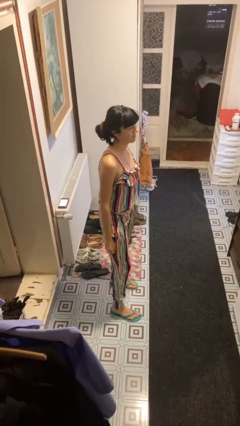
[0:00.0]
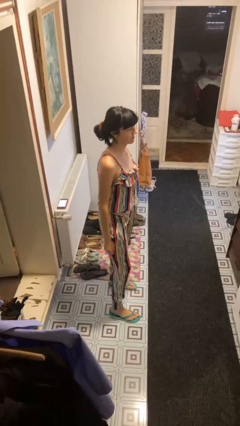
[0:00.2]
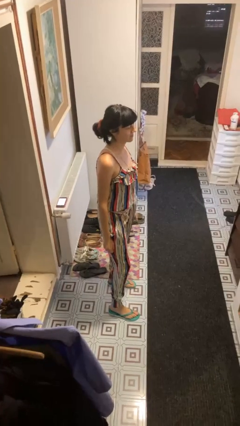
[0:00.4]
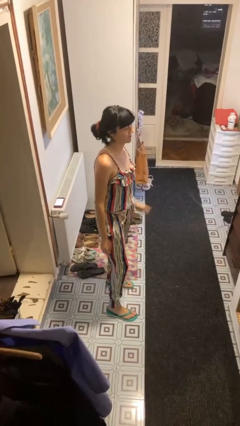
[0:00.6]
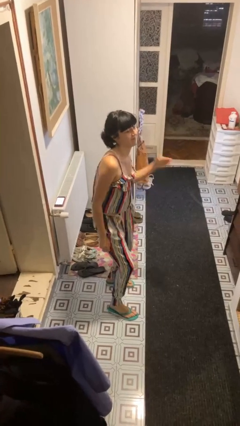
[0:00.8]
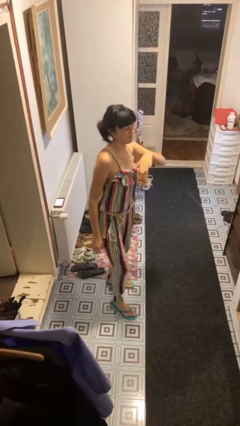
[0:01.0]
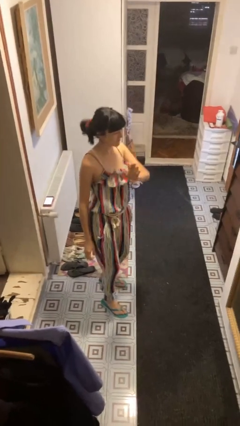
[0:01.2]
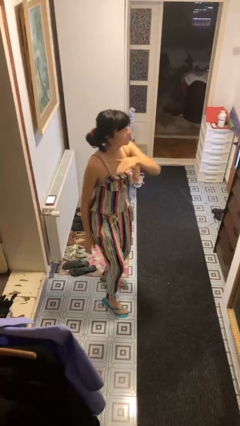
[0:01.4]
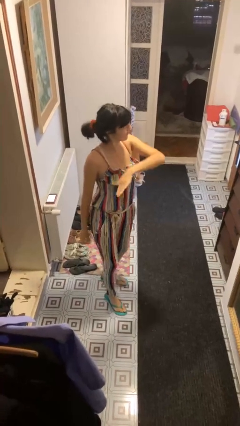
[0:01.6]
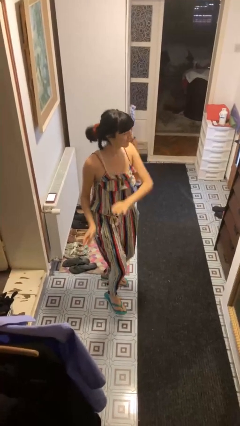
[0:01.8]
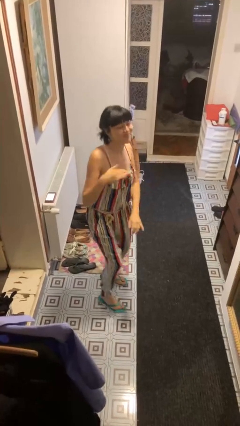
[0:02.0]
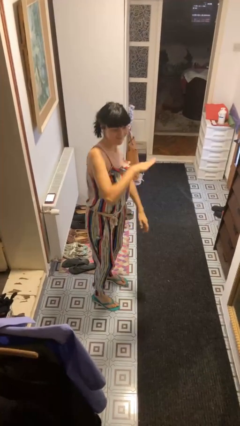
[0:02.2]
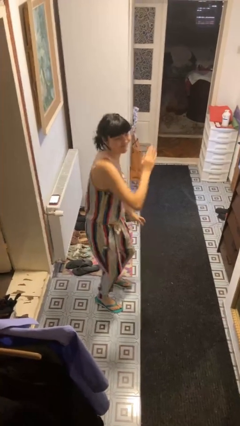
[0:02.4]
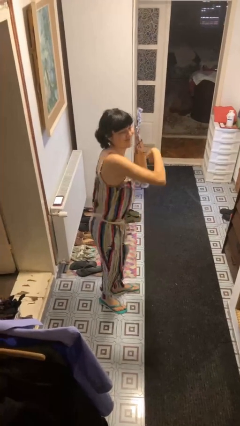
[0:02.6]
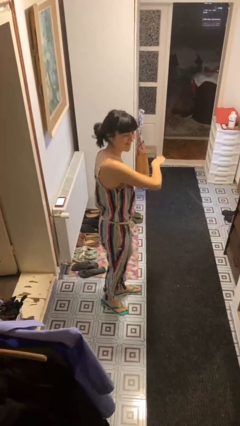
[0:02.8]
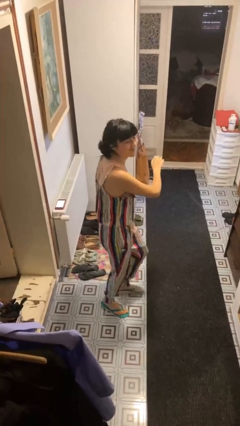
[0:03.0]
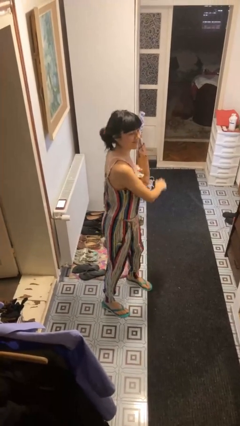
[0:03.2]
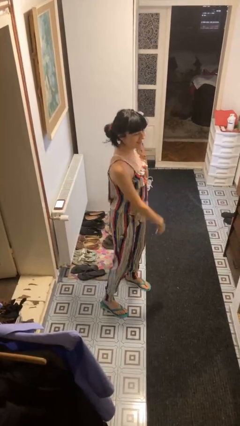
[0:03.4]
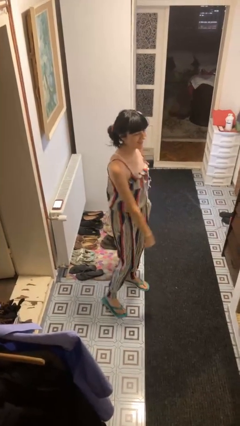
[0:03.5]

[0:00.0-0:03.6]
person dances in place

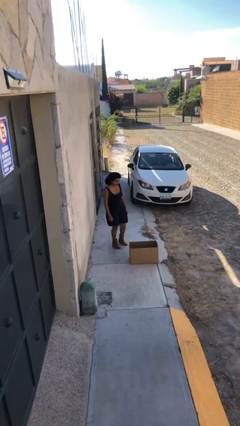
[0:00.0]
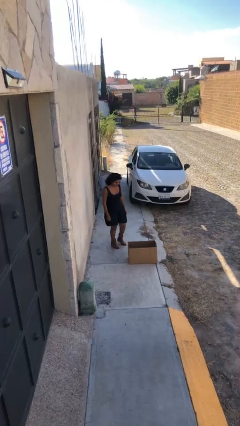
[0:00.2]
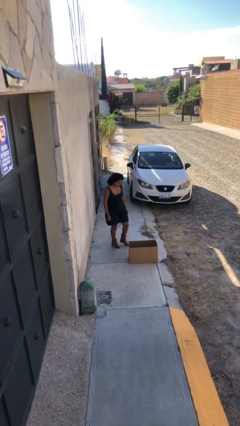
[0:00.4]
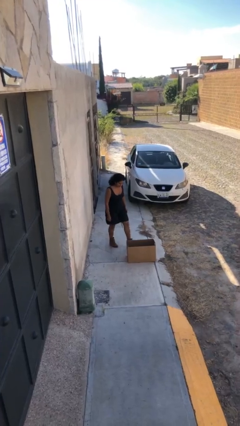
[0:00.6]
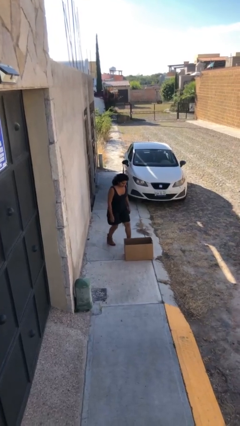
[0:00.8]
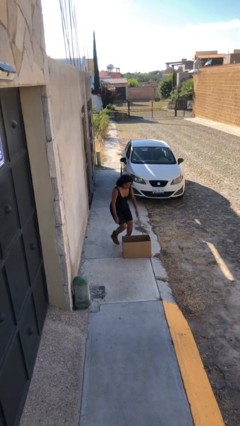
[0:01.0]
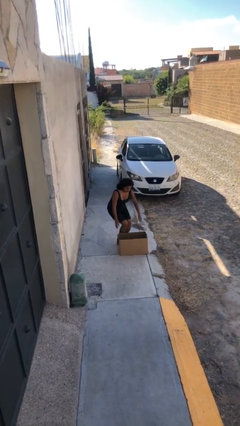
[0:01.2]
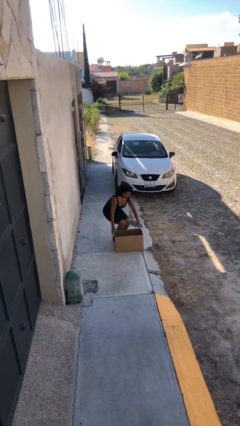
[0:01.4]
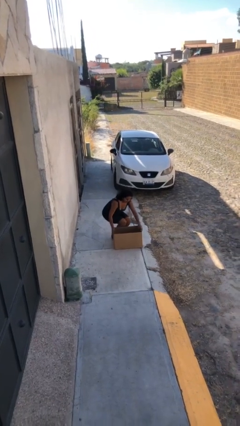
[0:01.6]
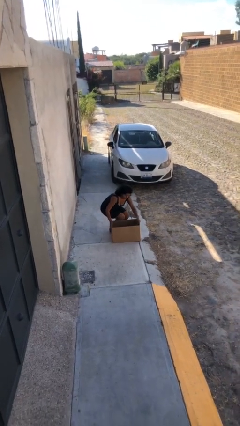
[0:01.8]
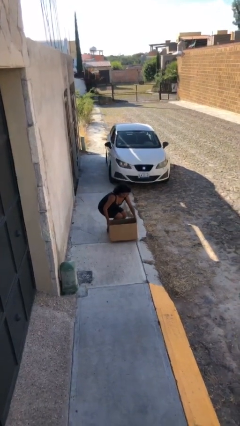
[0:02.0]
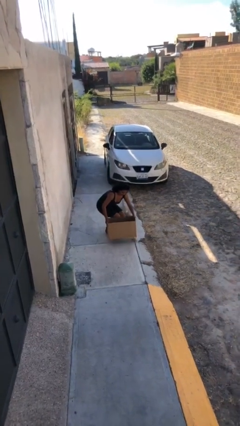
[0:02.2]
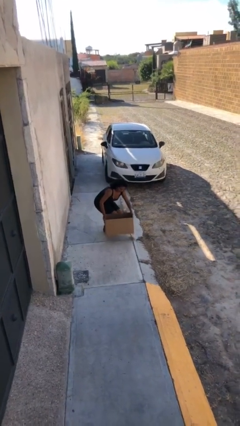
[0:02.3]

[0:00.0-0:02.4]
person picks up object from floor

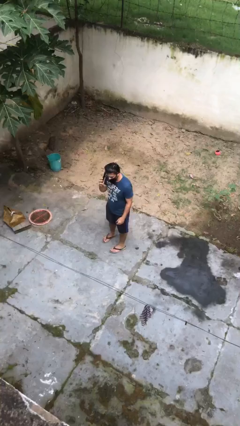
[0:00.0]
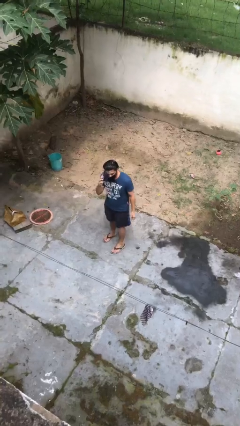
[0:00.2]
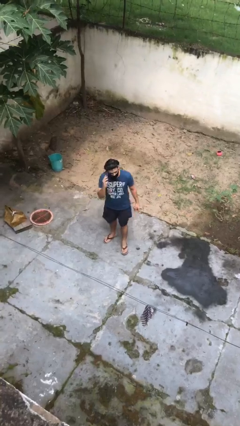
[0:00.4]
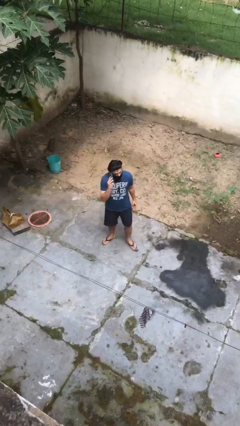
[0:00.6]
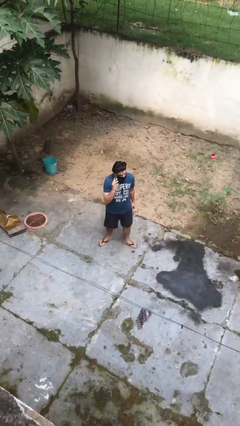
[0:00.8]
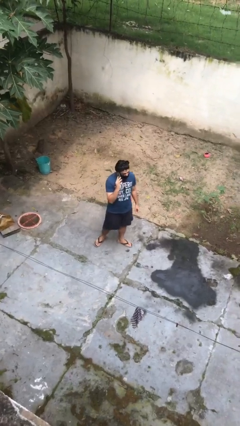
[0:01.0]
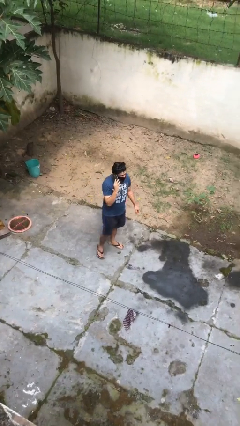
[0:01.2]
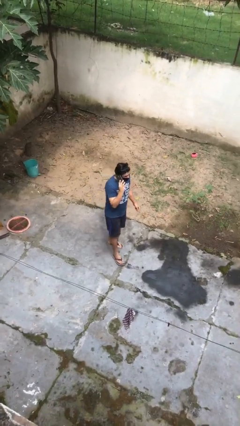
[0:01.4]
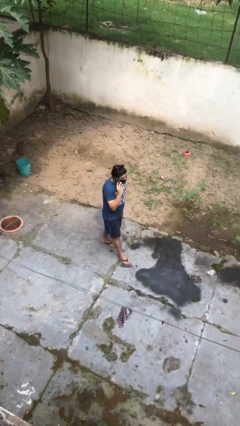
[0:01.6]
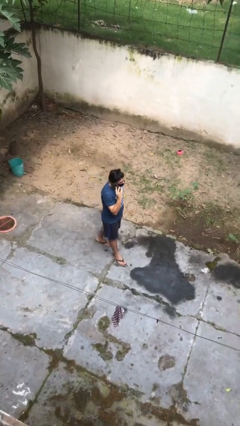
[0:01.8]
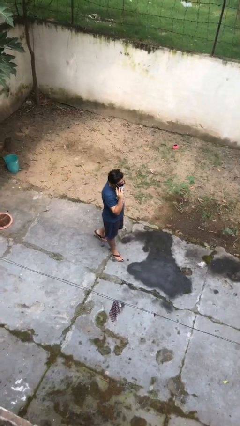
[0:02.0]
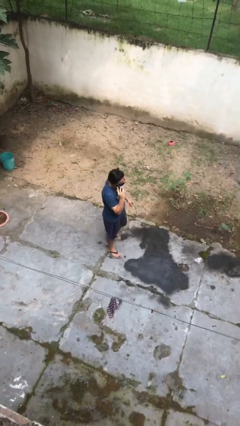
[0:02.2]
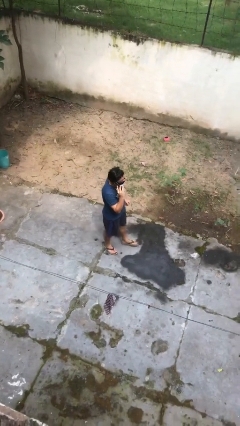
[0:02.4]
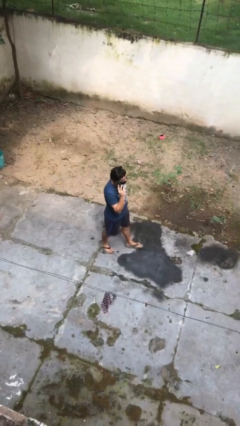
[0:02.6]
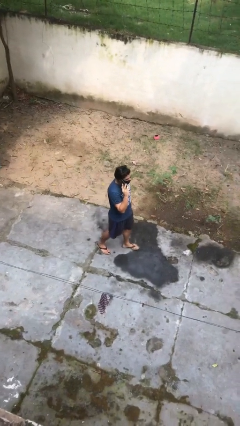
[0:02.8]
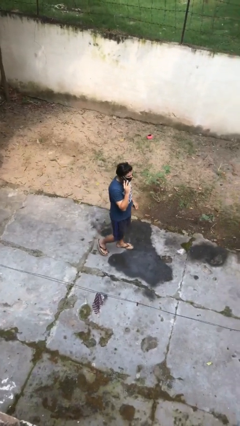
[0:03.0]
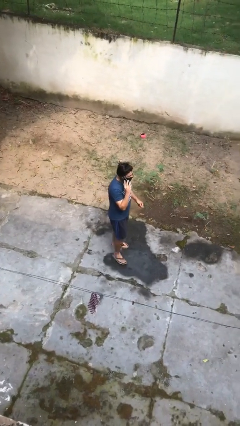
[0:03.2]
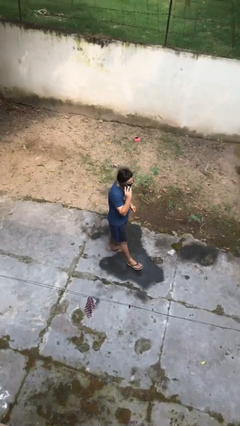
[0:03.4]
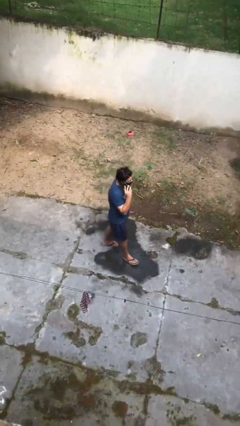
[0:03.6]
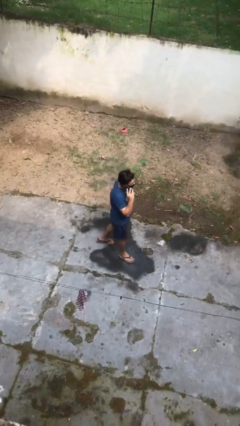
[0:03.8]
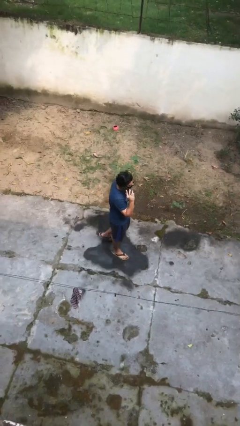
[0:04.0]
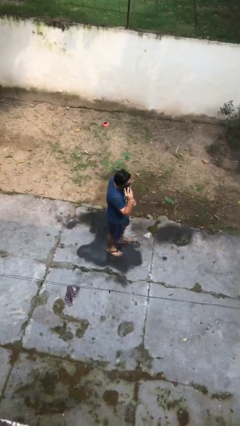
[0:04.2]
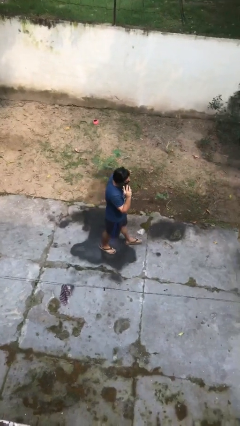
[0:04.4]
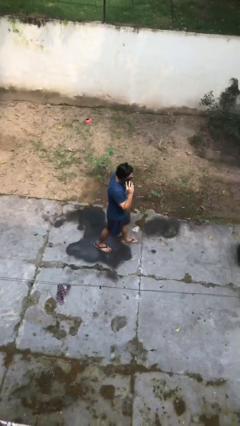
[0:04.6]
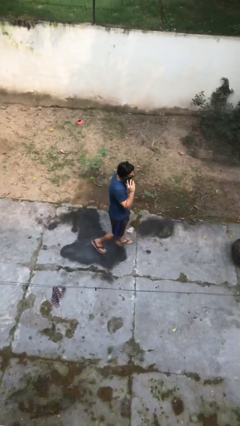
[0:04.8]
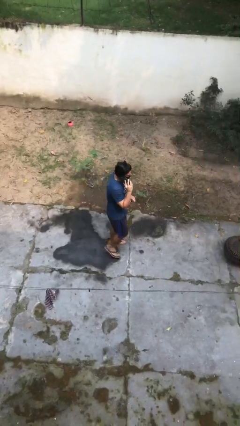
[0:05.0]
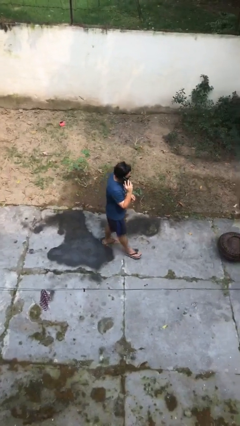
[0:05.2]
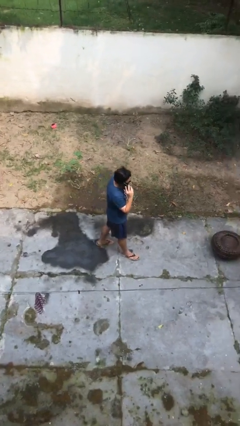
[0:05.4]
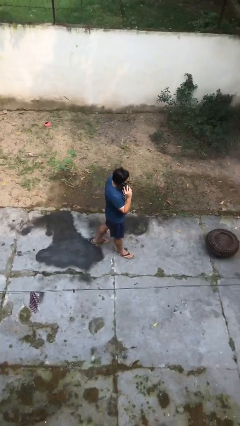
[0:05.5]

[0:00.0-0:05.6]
person talks on phone

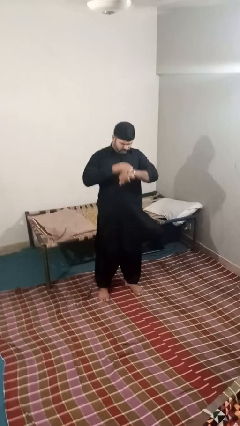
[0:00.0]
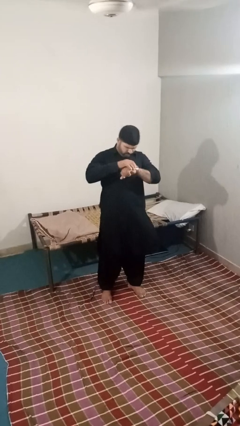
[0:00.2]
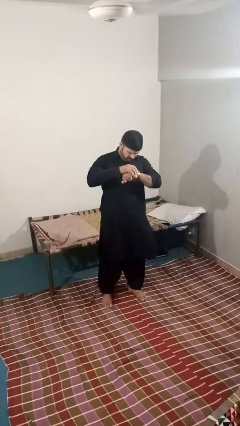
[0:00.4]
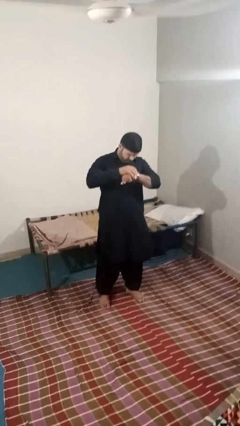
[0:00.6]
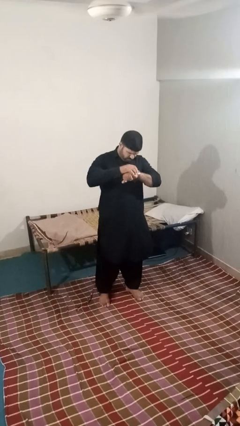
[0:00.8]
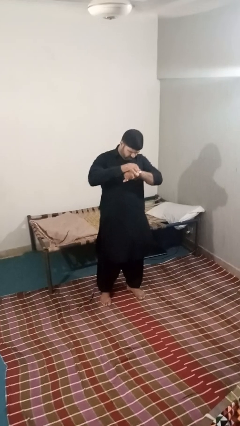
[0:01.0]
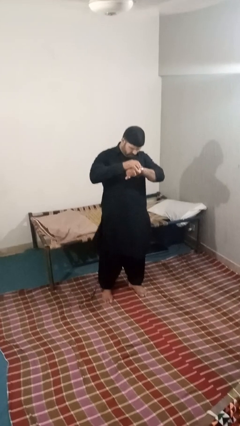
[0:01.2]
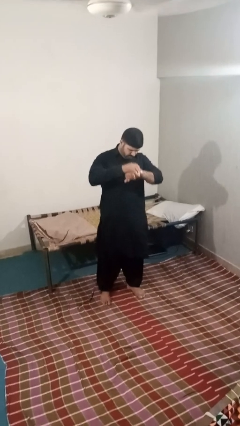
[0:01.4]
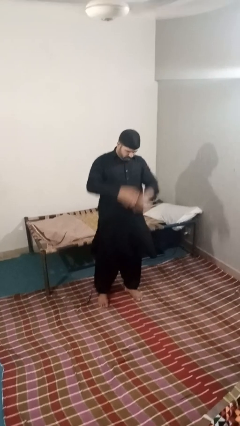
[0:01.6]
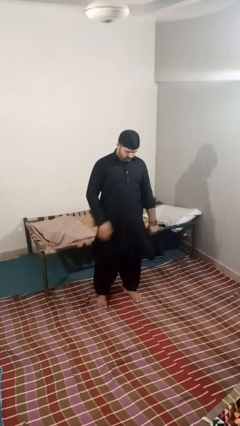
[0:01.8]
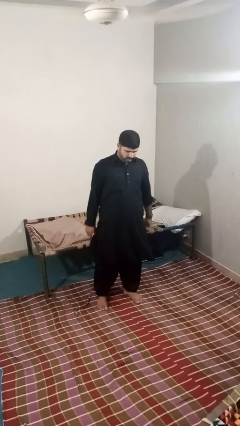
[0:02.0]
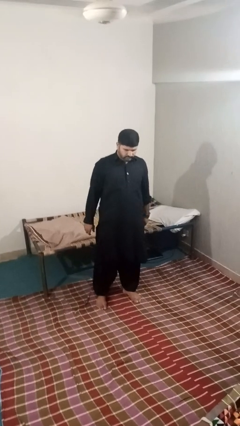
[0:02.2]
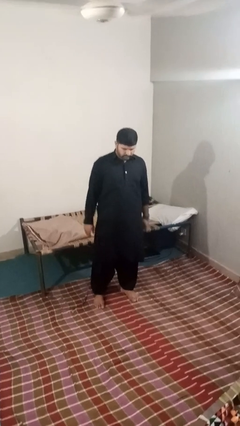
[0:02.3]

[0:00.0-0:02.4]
person looks at wristwatch

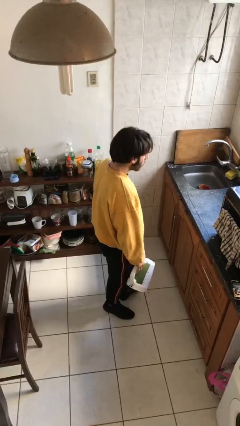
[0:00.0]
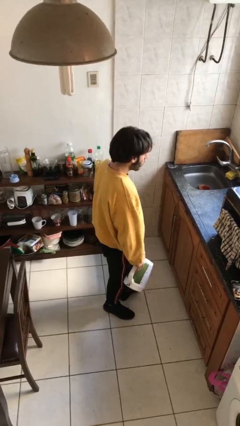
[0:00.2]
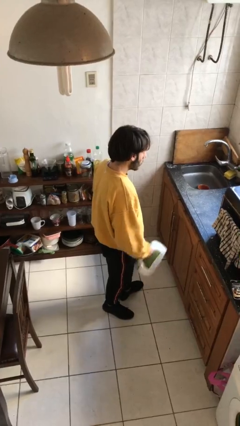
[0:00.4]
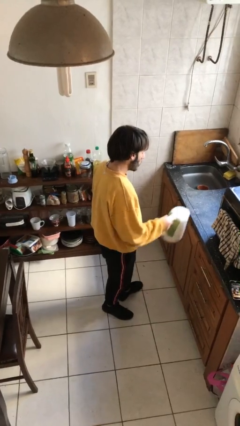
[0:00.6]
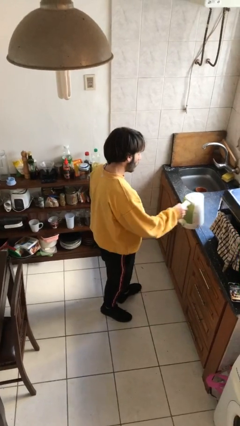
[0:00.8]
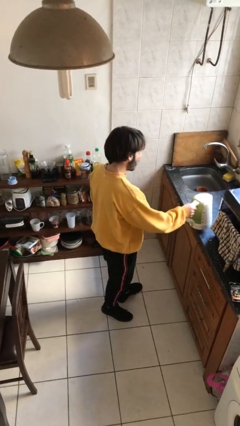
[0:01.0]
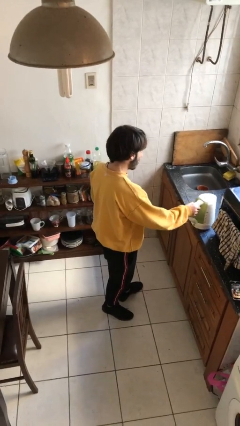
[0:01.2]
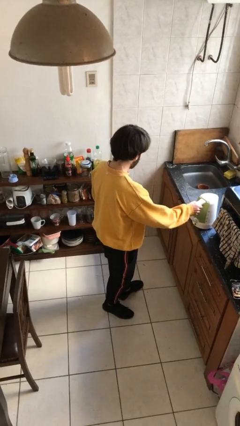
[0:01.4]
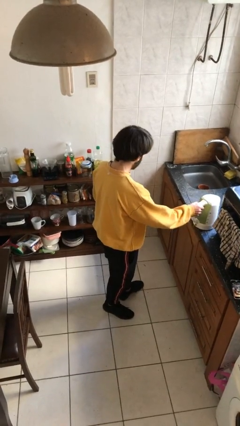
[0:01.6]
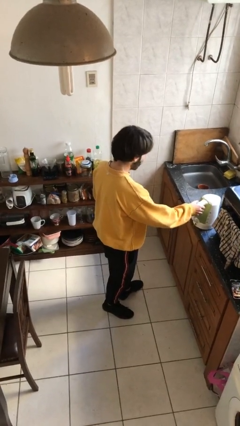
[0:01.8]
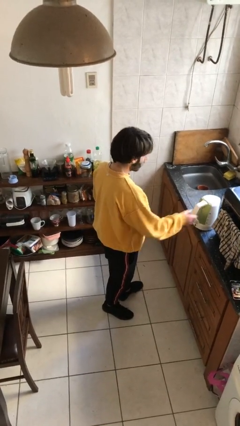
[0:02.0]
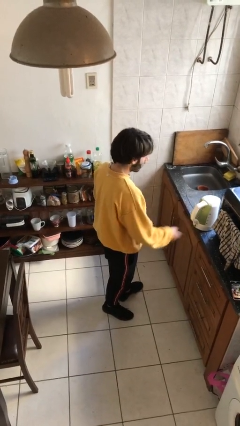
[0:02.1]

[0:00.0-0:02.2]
person puts down object on countertop

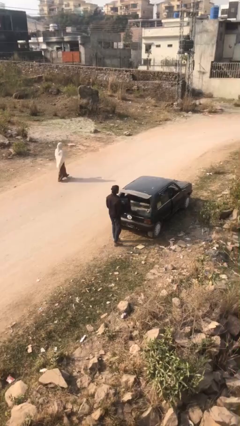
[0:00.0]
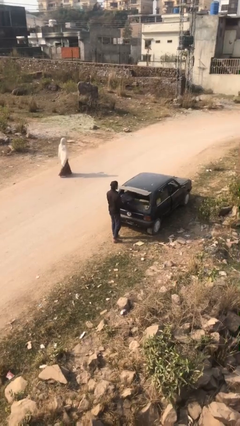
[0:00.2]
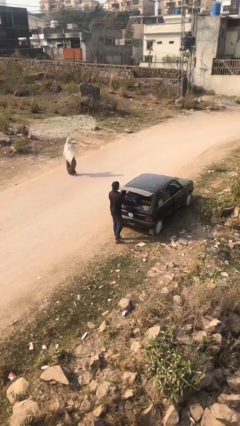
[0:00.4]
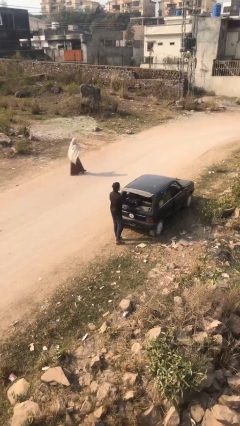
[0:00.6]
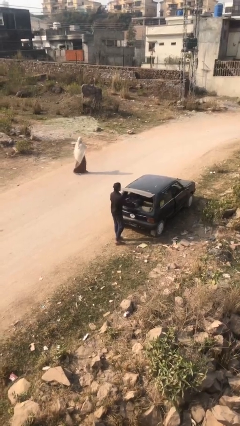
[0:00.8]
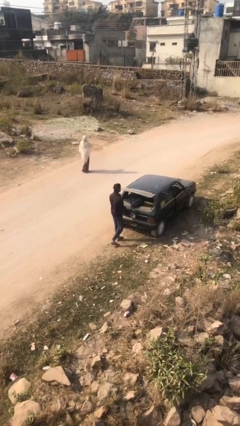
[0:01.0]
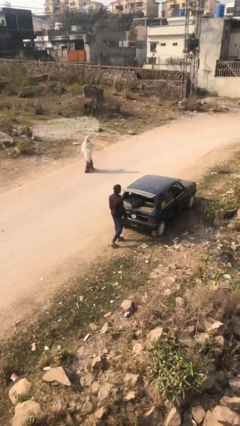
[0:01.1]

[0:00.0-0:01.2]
person loads car

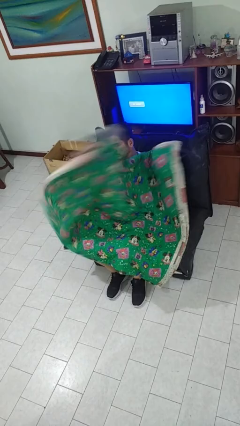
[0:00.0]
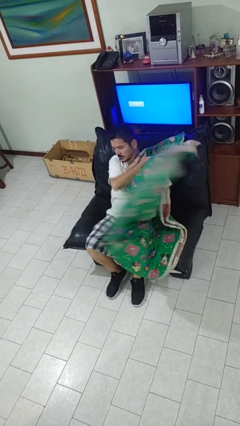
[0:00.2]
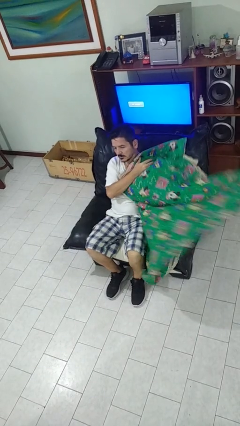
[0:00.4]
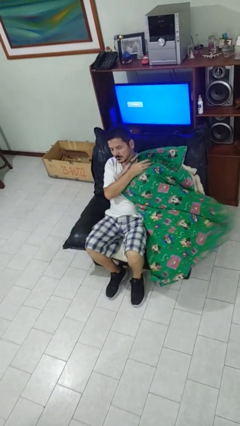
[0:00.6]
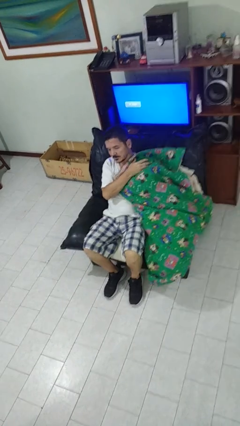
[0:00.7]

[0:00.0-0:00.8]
person uncovers with blanket
